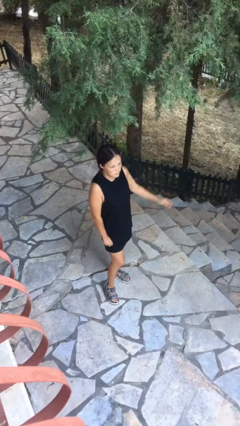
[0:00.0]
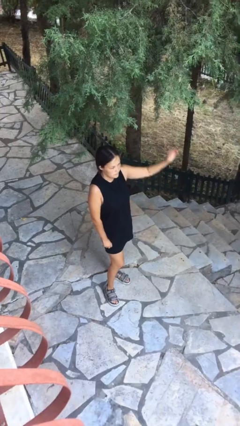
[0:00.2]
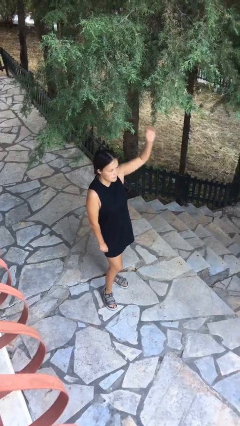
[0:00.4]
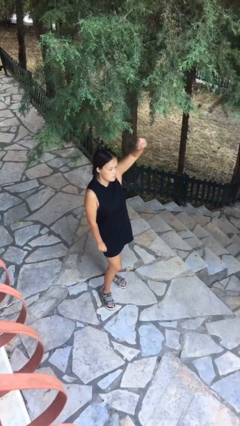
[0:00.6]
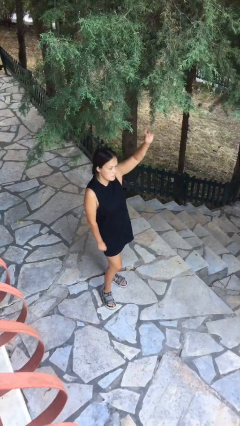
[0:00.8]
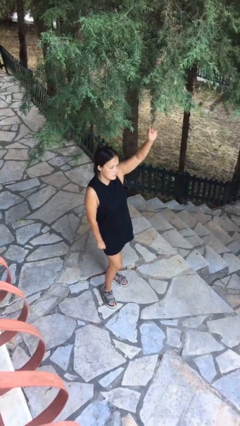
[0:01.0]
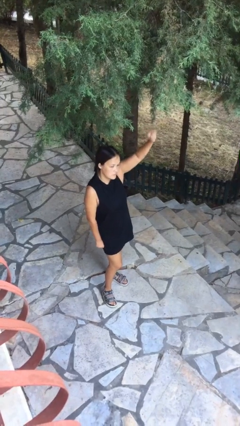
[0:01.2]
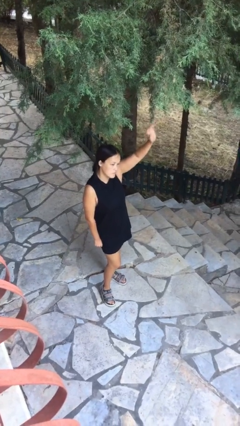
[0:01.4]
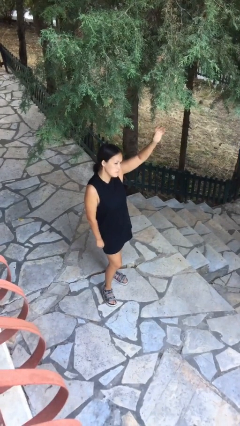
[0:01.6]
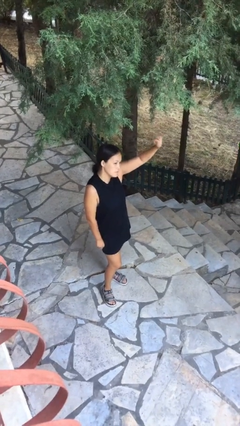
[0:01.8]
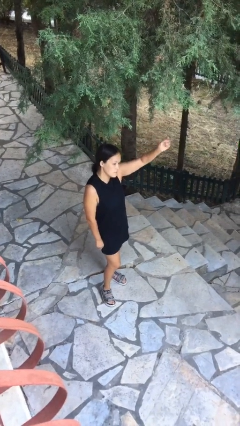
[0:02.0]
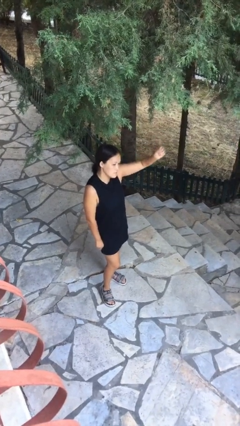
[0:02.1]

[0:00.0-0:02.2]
person gestures raise hand

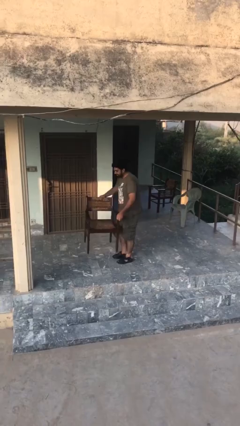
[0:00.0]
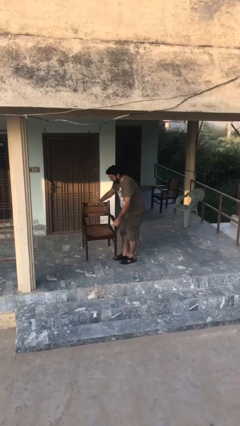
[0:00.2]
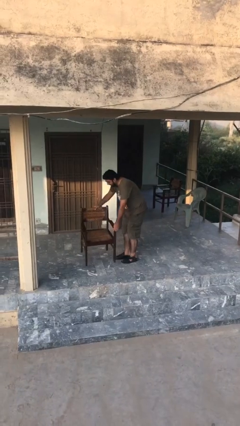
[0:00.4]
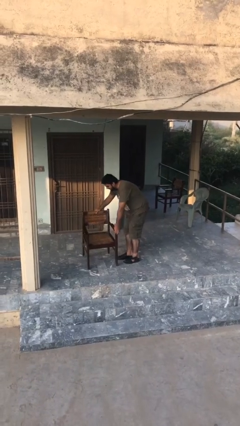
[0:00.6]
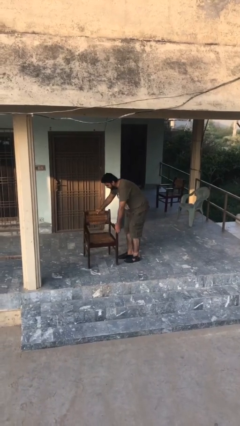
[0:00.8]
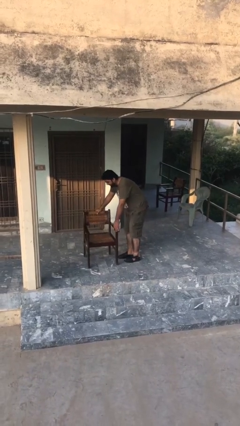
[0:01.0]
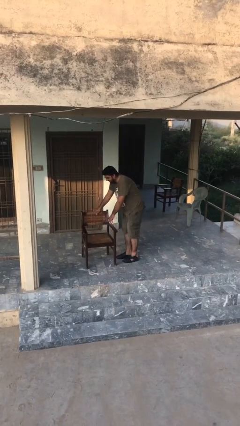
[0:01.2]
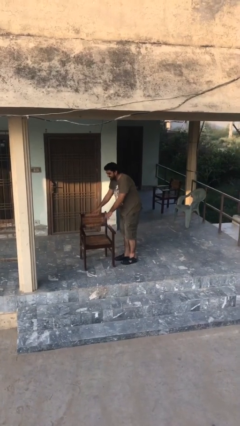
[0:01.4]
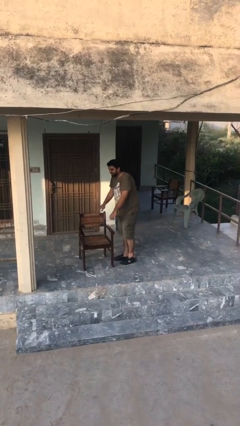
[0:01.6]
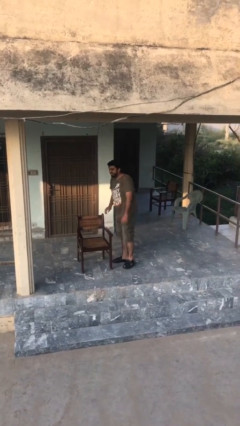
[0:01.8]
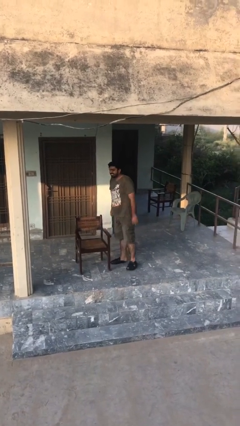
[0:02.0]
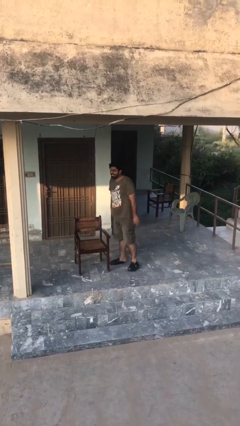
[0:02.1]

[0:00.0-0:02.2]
person puts down object on floor

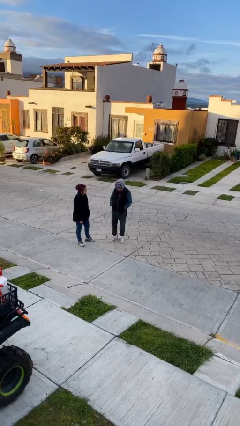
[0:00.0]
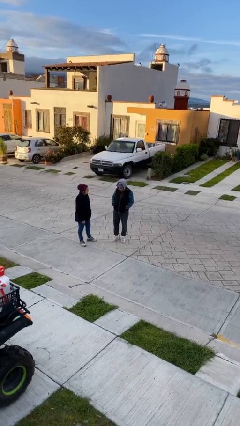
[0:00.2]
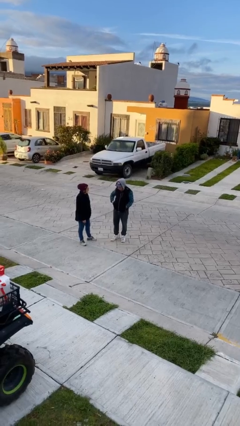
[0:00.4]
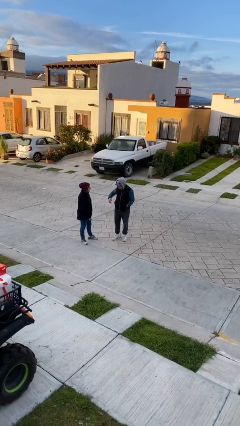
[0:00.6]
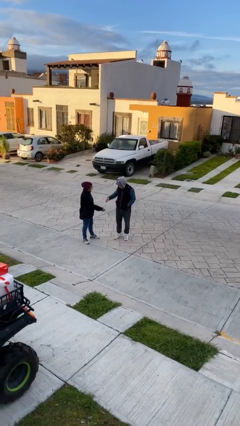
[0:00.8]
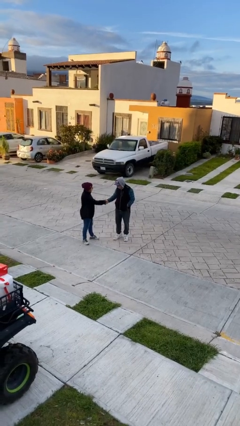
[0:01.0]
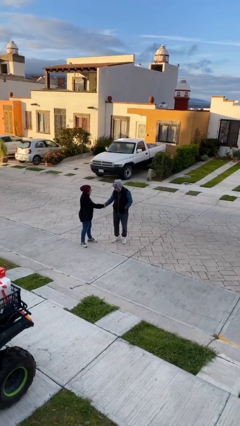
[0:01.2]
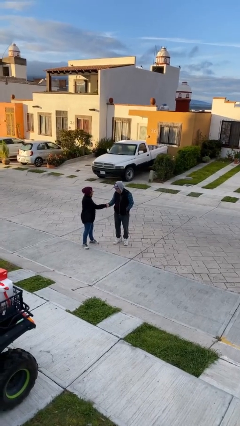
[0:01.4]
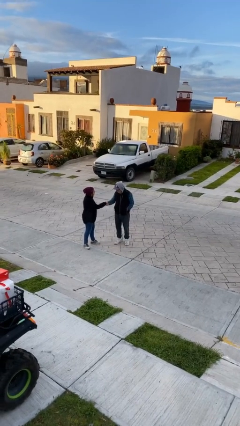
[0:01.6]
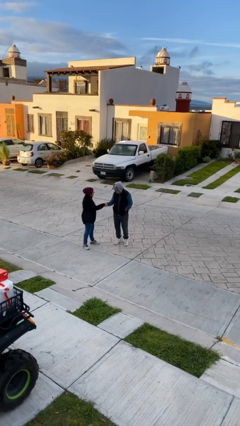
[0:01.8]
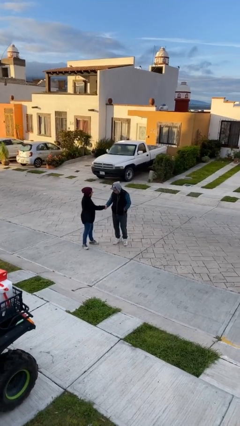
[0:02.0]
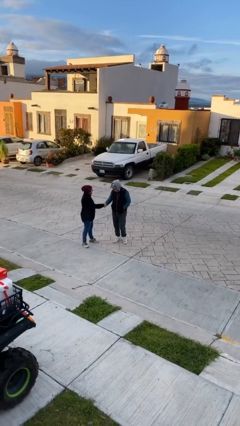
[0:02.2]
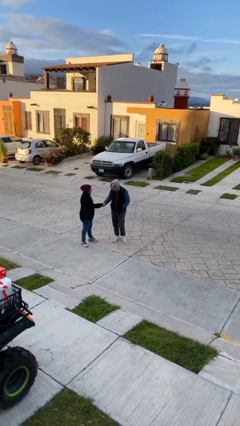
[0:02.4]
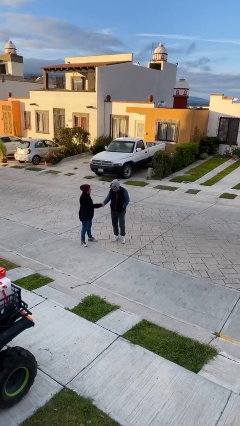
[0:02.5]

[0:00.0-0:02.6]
person shakes hand

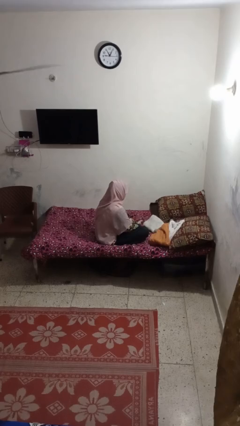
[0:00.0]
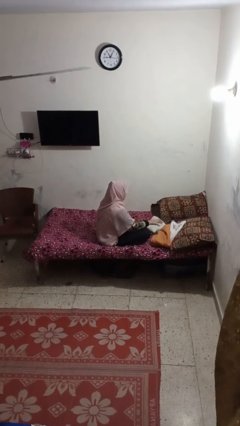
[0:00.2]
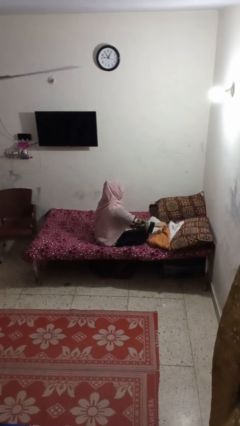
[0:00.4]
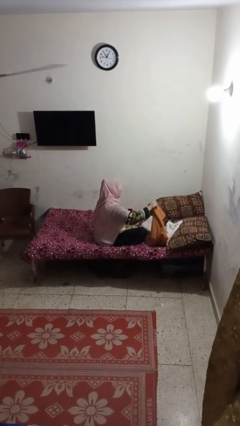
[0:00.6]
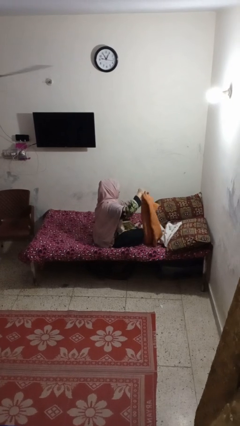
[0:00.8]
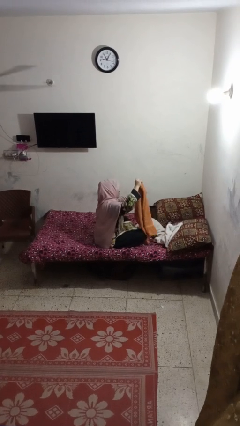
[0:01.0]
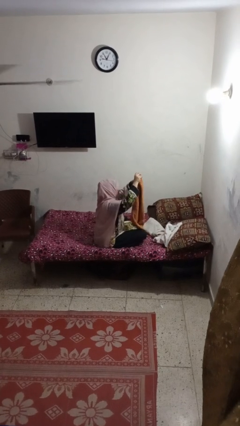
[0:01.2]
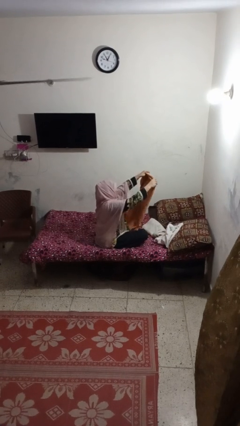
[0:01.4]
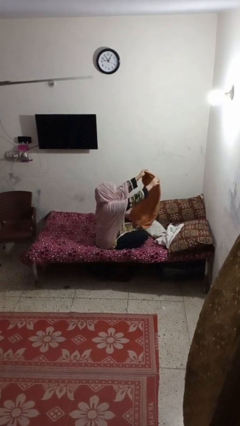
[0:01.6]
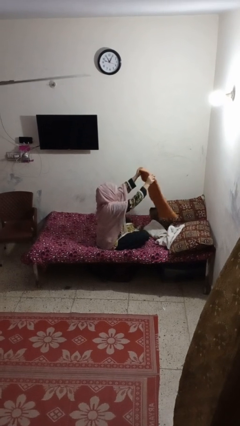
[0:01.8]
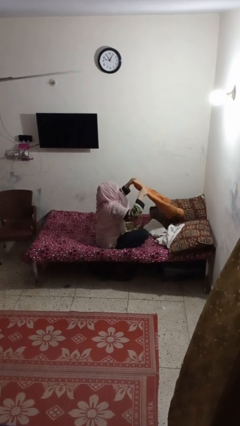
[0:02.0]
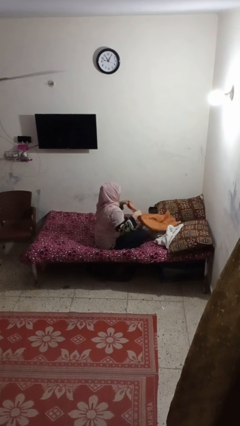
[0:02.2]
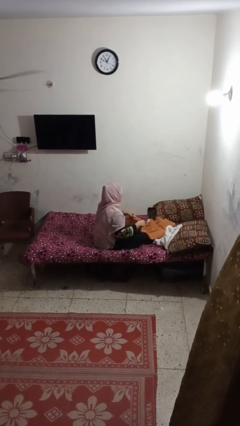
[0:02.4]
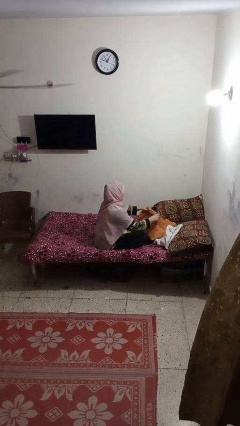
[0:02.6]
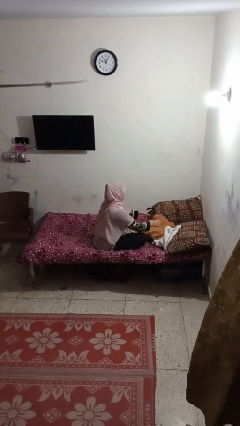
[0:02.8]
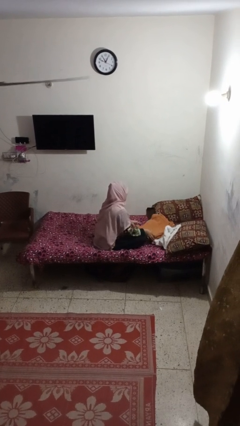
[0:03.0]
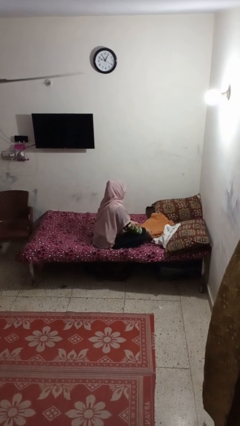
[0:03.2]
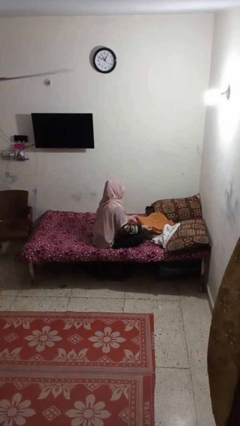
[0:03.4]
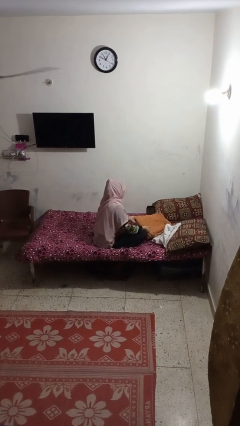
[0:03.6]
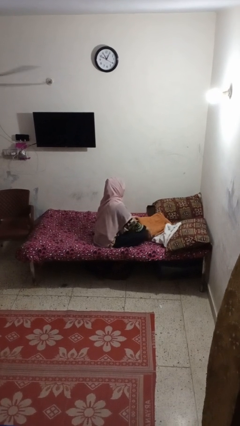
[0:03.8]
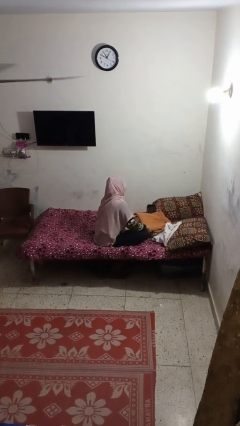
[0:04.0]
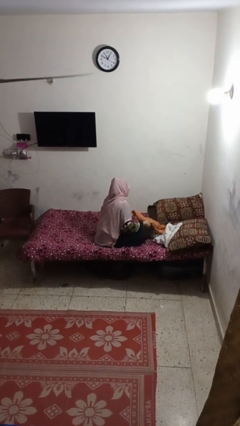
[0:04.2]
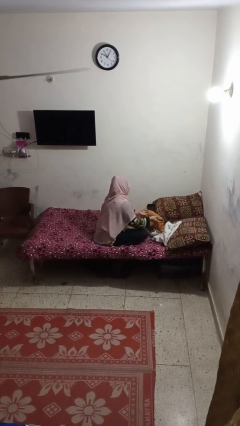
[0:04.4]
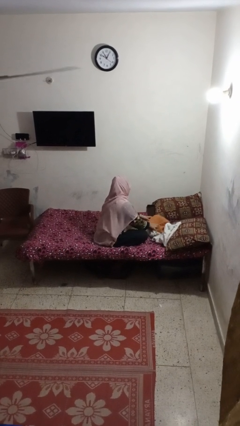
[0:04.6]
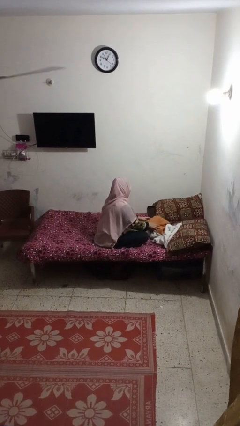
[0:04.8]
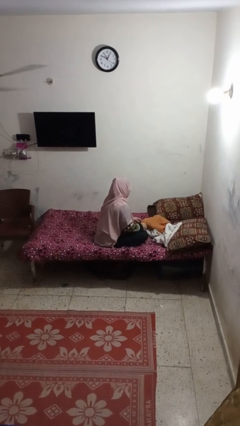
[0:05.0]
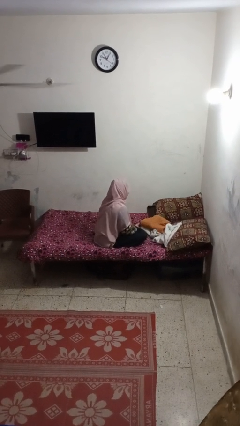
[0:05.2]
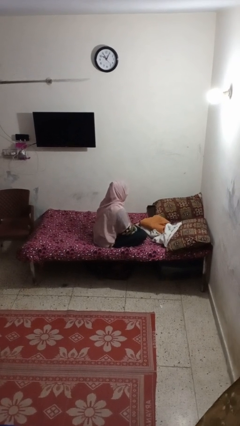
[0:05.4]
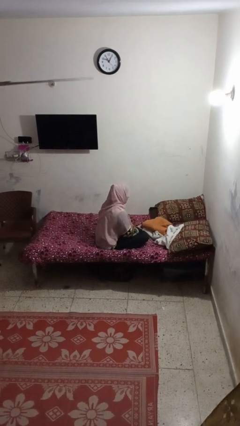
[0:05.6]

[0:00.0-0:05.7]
person folds towel

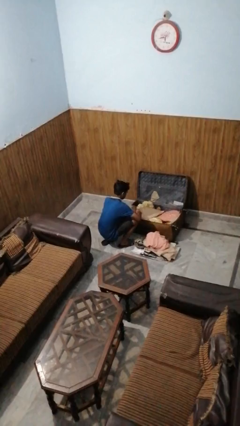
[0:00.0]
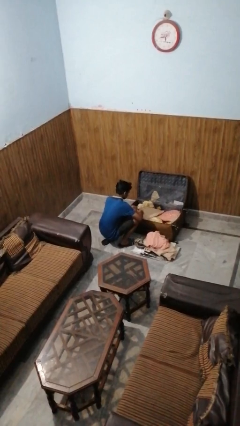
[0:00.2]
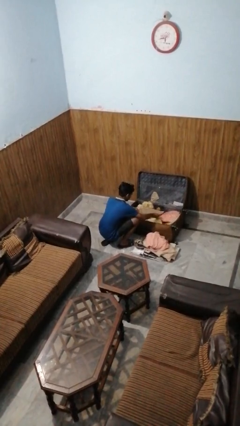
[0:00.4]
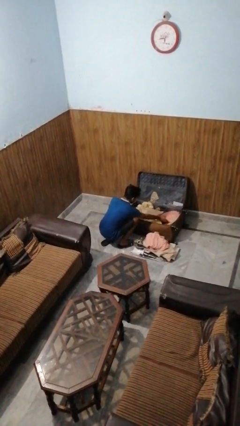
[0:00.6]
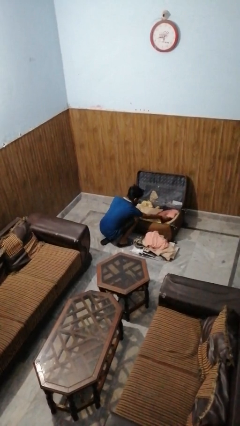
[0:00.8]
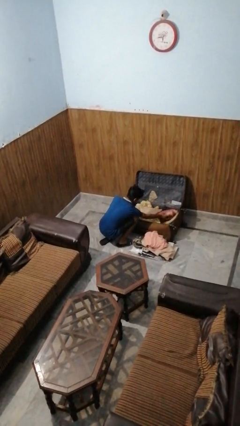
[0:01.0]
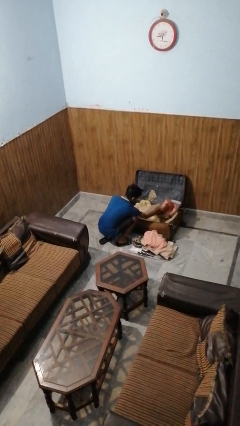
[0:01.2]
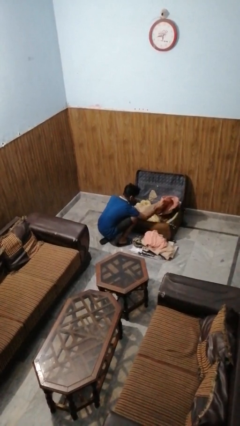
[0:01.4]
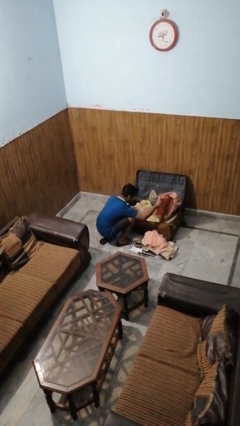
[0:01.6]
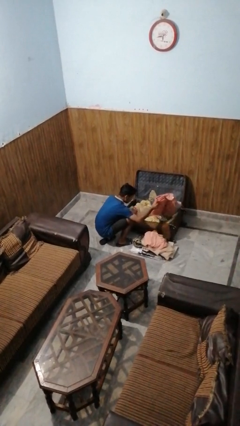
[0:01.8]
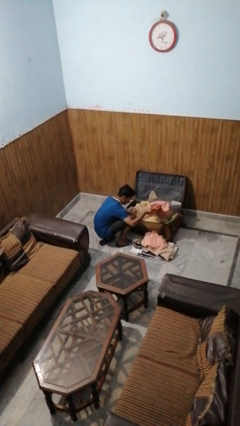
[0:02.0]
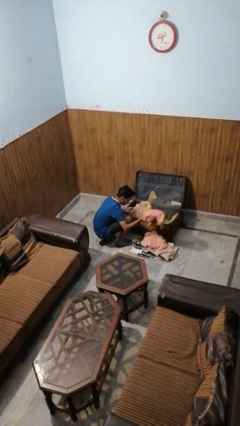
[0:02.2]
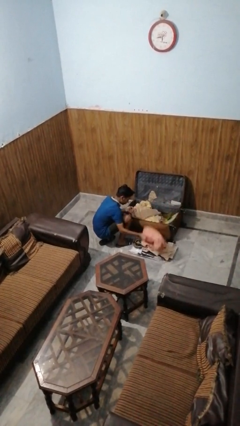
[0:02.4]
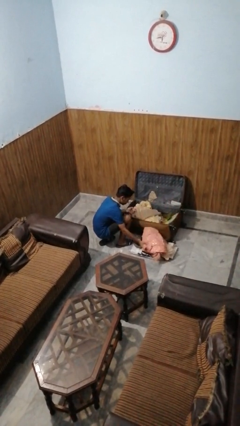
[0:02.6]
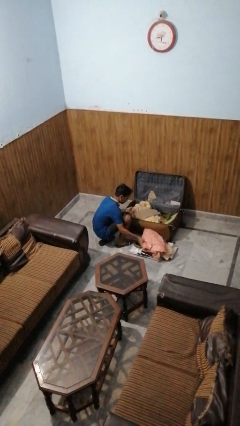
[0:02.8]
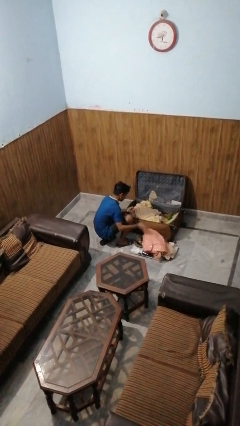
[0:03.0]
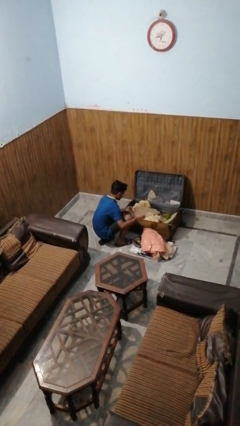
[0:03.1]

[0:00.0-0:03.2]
person unloads clothes from suitcase

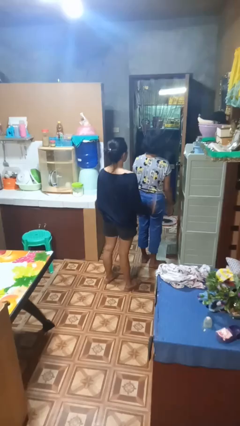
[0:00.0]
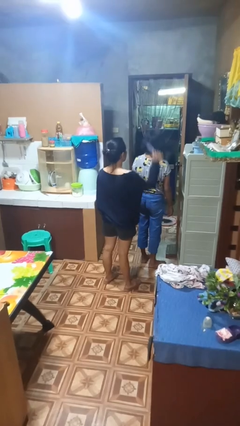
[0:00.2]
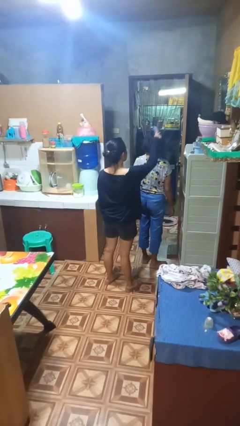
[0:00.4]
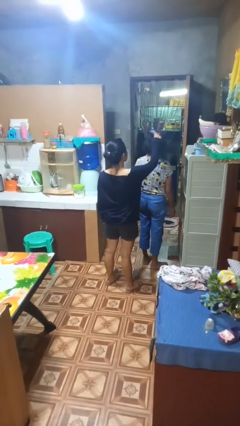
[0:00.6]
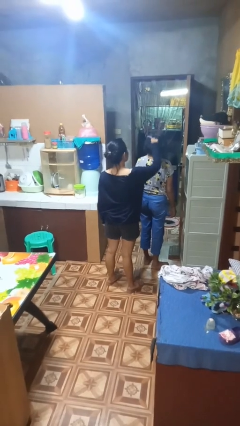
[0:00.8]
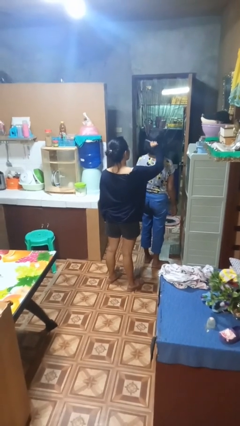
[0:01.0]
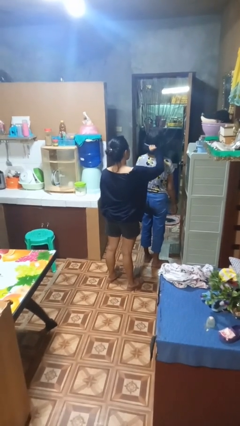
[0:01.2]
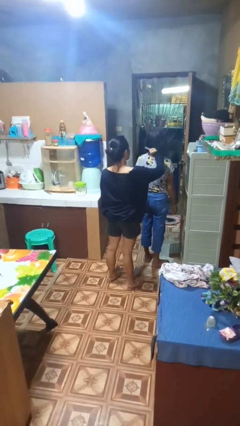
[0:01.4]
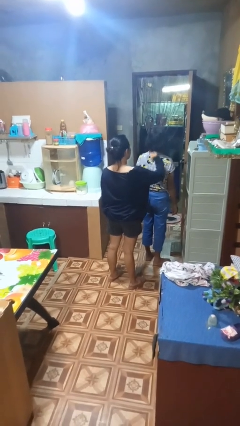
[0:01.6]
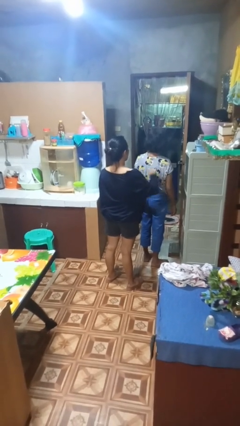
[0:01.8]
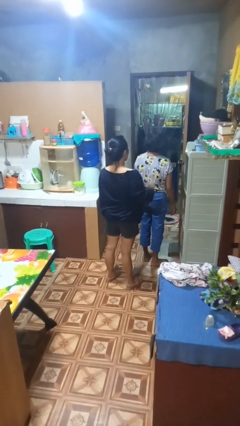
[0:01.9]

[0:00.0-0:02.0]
person brushes hair of person

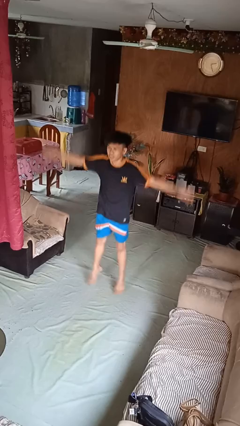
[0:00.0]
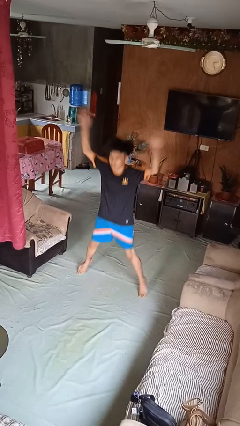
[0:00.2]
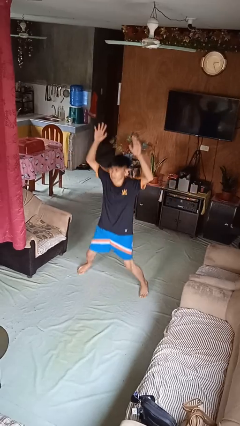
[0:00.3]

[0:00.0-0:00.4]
person exercises with jumping jacks
